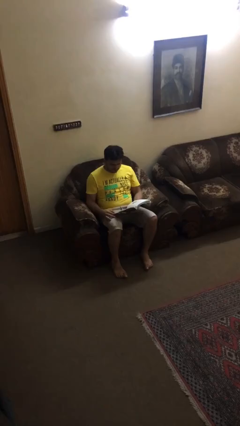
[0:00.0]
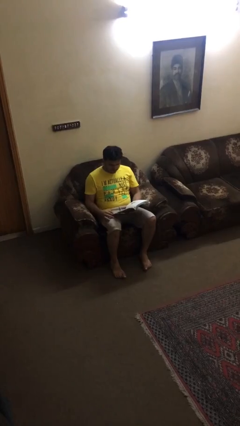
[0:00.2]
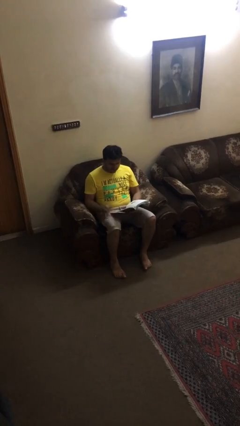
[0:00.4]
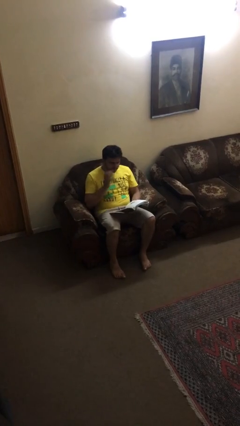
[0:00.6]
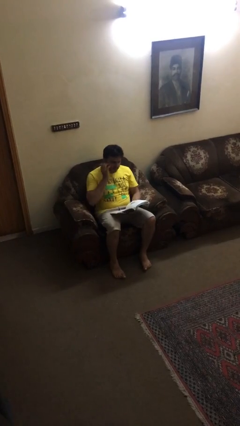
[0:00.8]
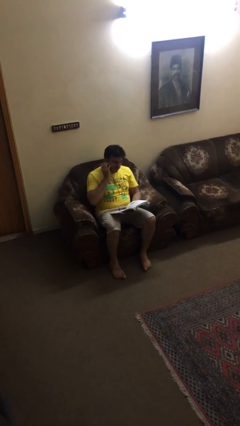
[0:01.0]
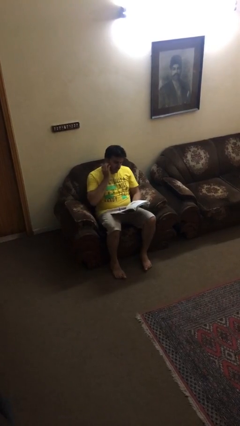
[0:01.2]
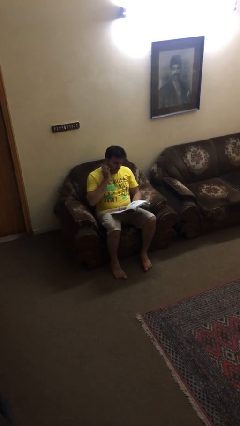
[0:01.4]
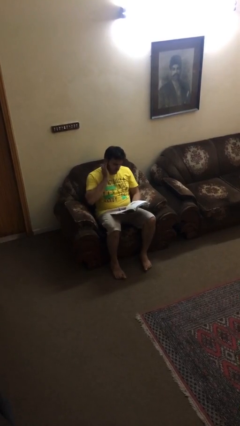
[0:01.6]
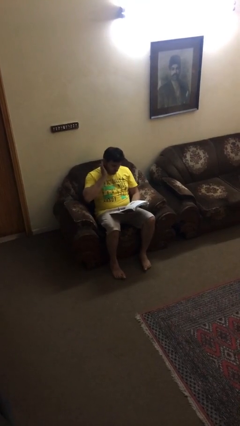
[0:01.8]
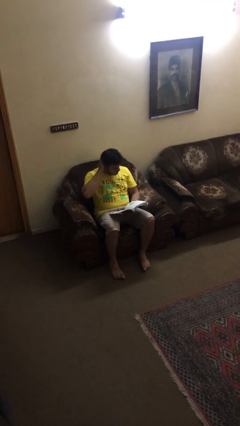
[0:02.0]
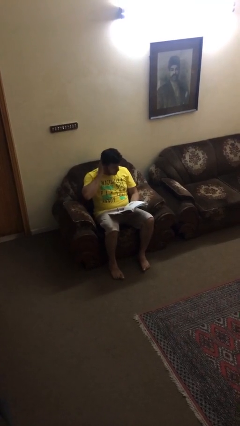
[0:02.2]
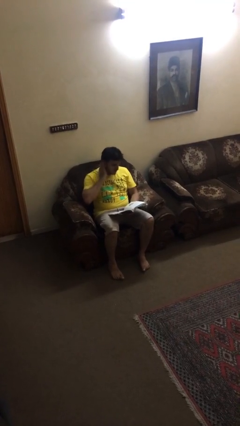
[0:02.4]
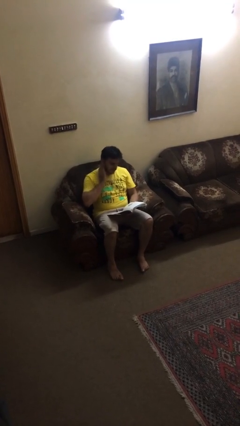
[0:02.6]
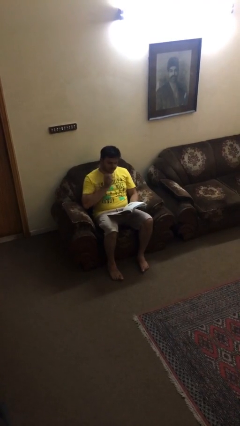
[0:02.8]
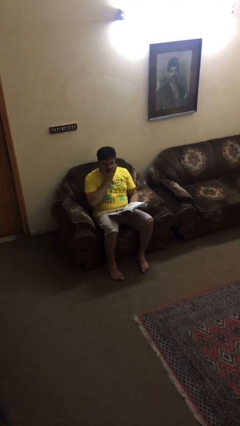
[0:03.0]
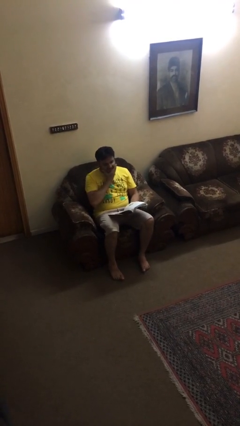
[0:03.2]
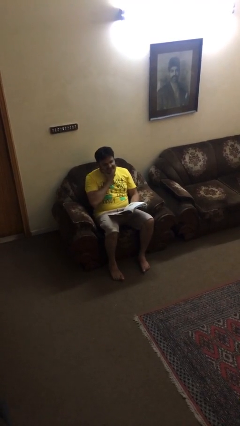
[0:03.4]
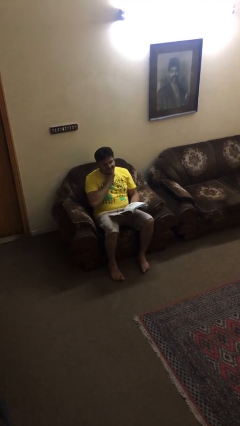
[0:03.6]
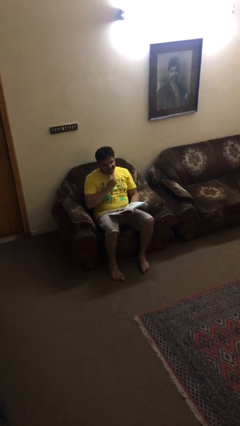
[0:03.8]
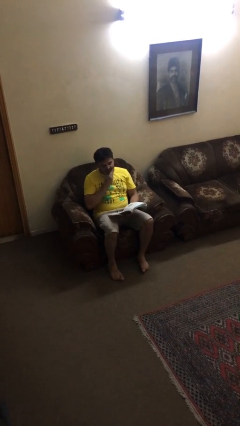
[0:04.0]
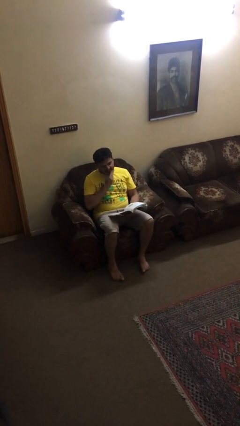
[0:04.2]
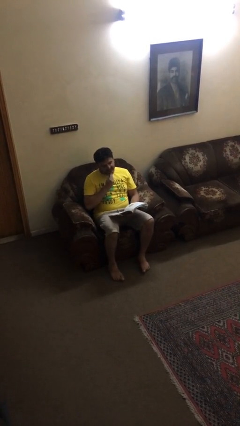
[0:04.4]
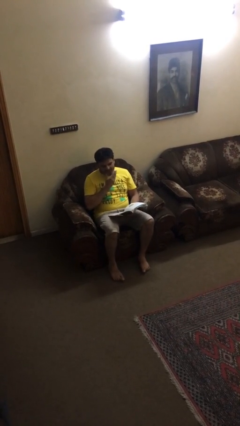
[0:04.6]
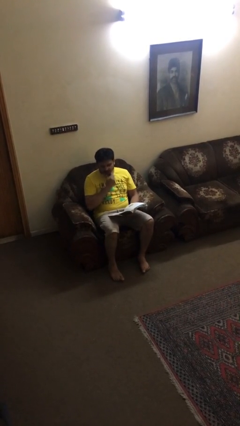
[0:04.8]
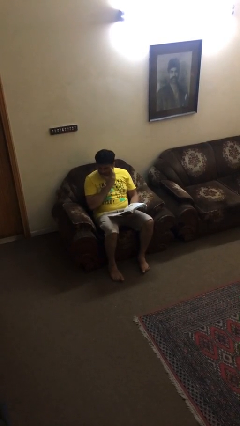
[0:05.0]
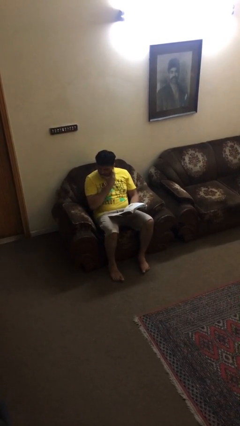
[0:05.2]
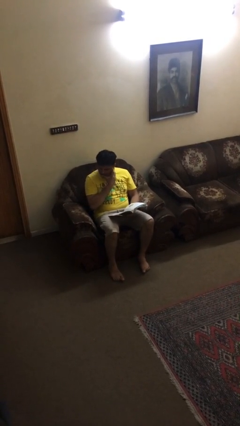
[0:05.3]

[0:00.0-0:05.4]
person reads document

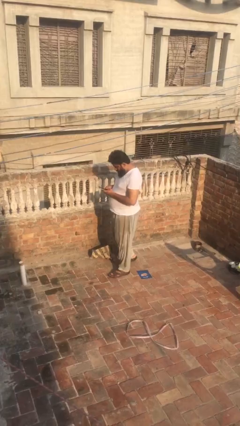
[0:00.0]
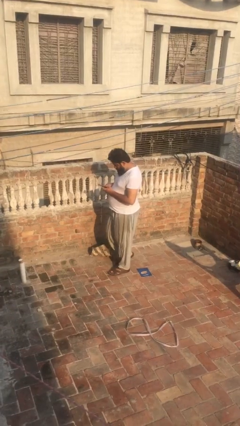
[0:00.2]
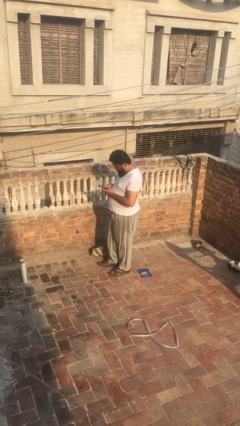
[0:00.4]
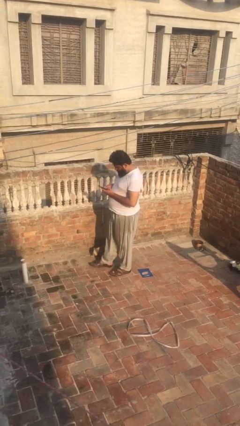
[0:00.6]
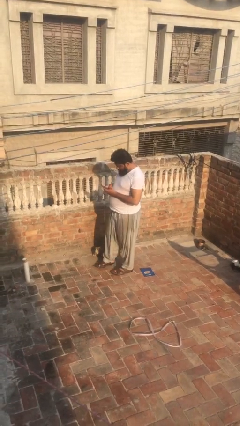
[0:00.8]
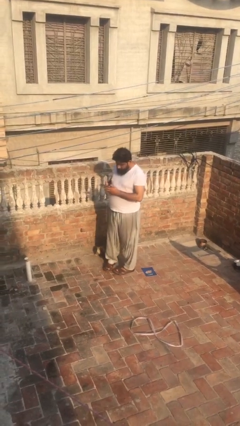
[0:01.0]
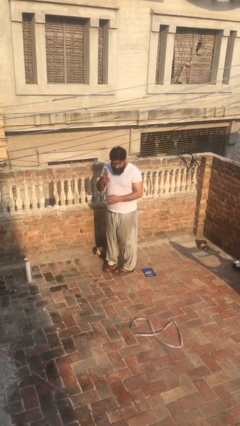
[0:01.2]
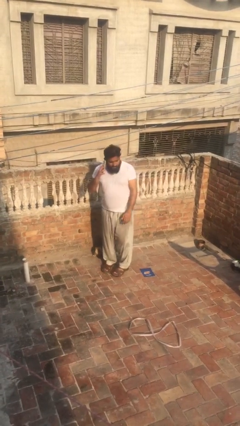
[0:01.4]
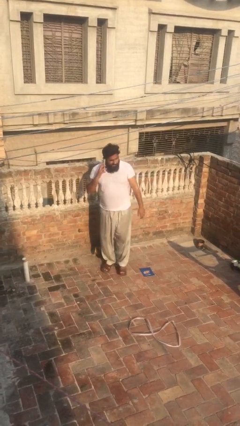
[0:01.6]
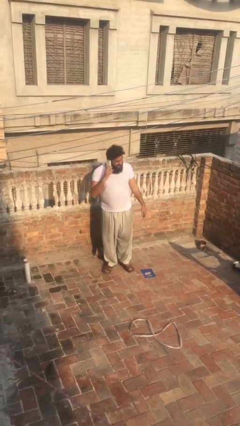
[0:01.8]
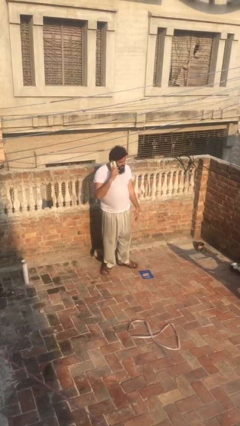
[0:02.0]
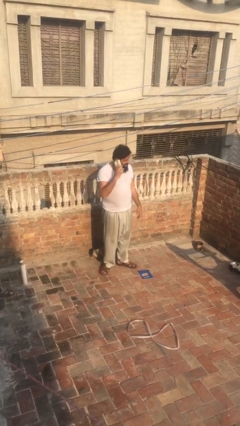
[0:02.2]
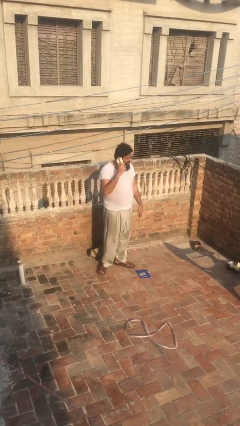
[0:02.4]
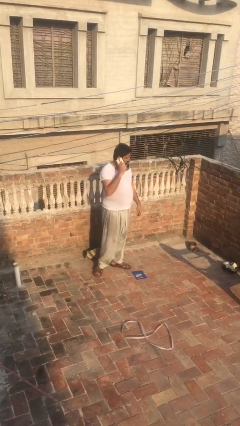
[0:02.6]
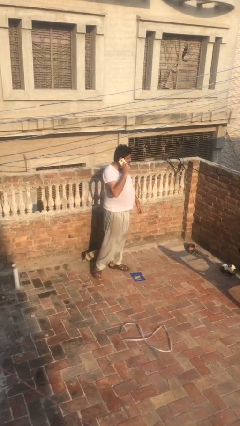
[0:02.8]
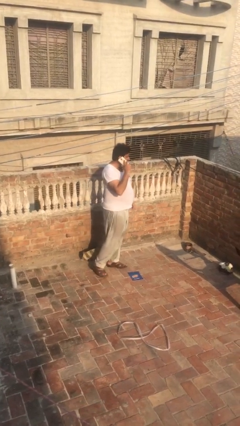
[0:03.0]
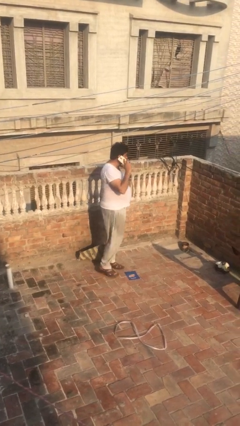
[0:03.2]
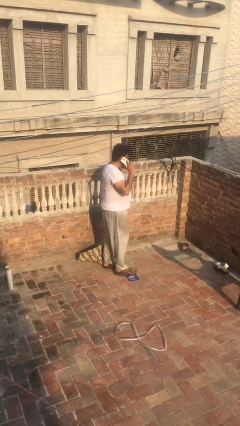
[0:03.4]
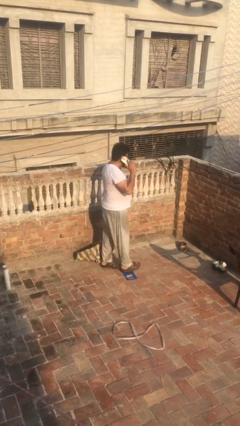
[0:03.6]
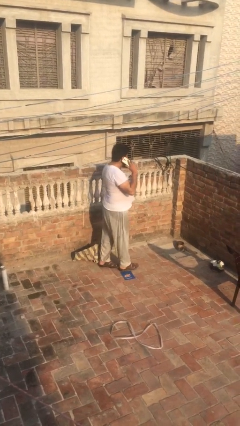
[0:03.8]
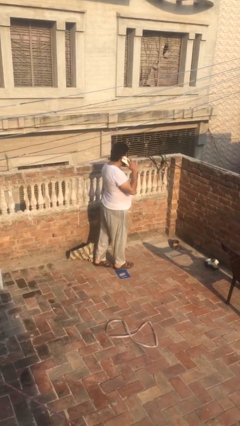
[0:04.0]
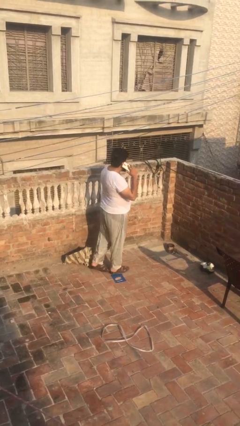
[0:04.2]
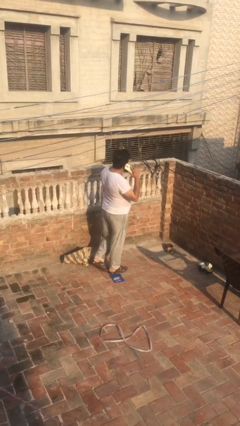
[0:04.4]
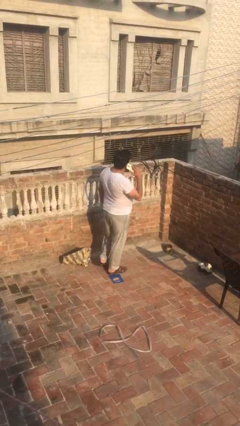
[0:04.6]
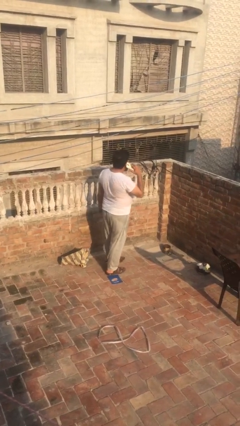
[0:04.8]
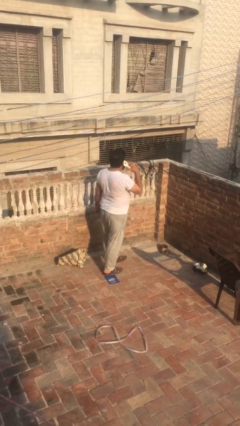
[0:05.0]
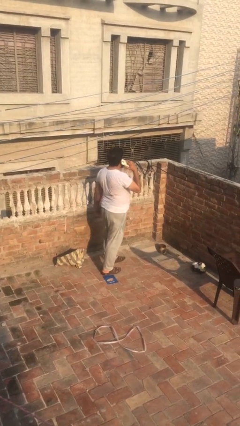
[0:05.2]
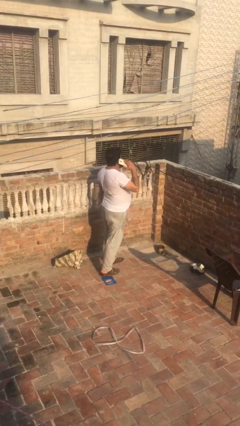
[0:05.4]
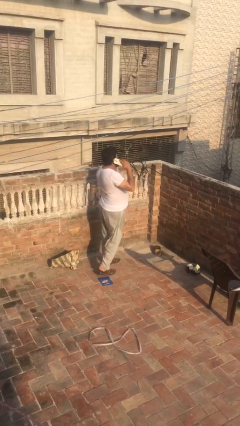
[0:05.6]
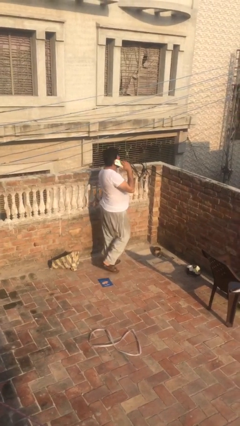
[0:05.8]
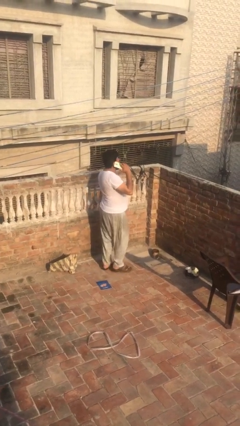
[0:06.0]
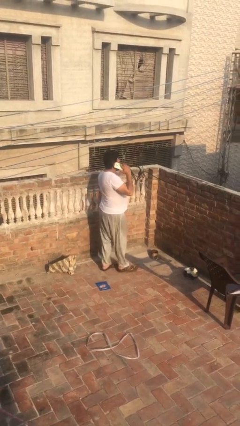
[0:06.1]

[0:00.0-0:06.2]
person talks on phone

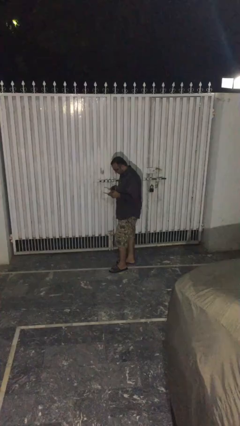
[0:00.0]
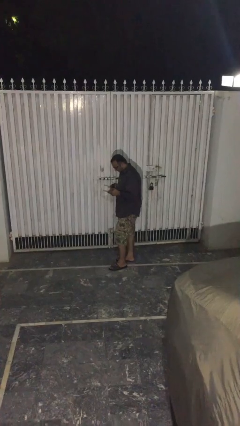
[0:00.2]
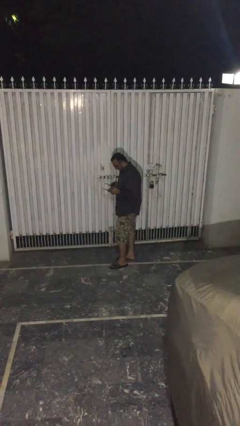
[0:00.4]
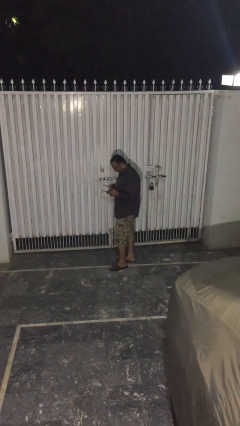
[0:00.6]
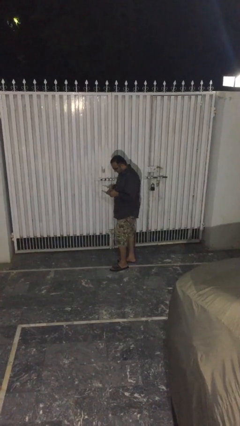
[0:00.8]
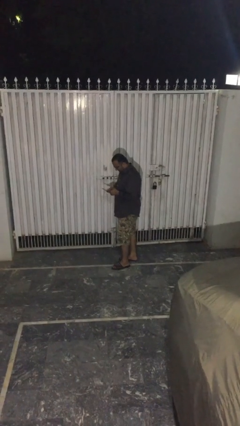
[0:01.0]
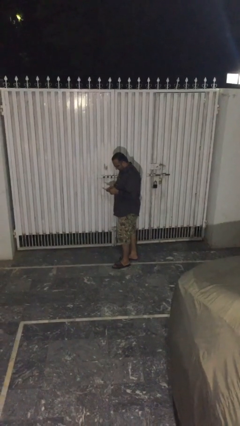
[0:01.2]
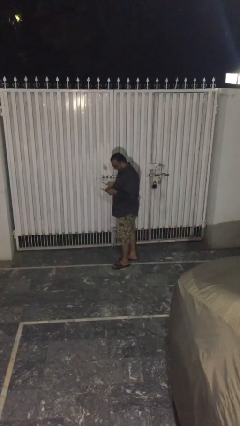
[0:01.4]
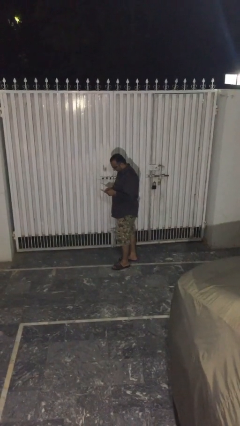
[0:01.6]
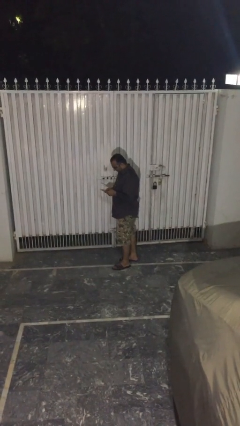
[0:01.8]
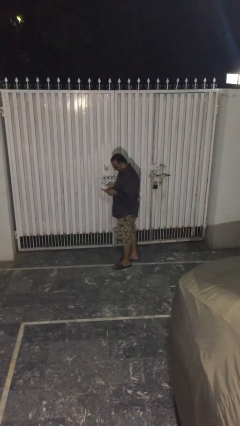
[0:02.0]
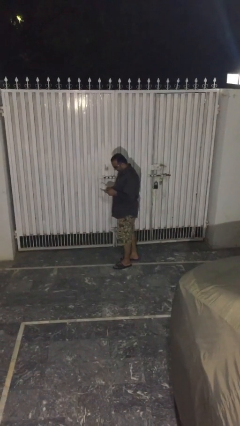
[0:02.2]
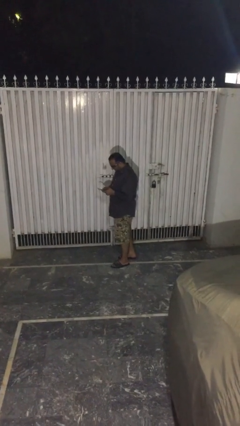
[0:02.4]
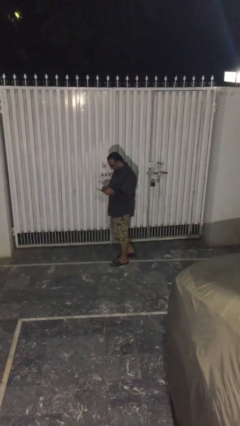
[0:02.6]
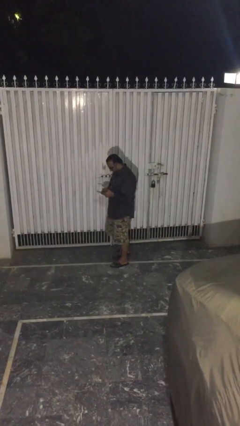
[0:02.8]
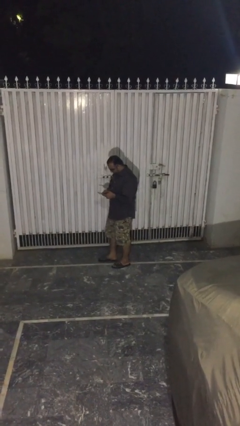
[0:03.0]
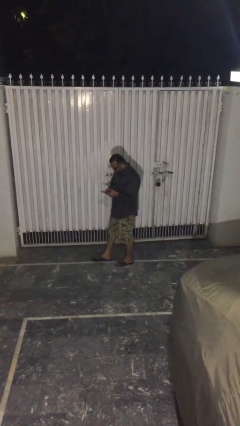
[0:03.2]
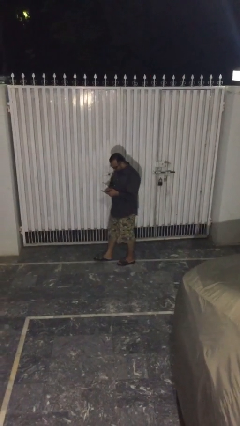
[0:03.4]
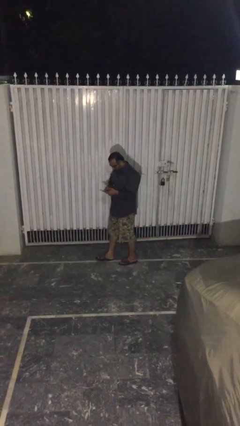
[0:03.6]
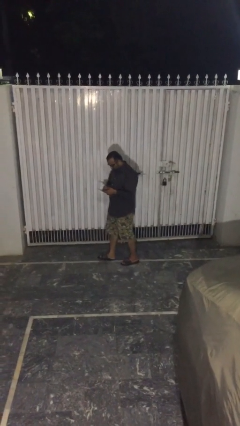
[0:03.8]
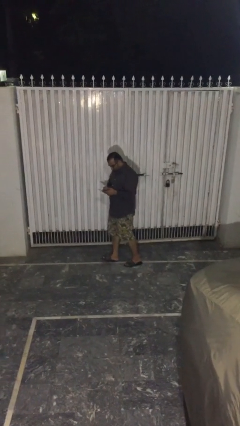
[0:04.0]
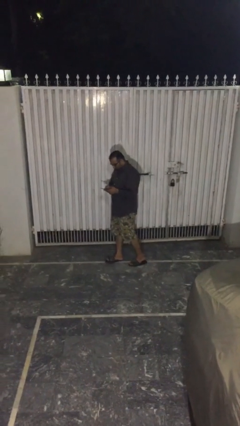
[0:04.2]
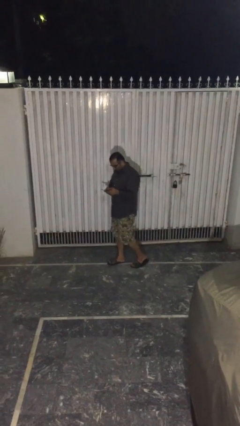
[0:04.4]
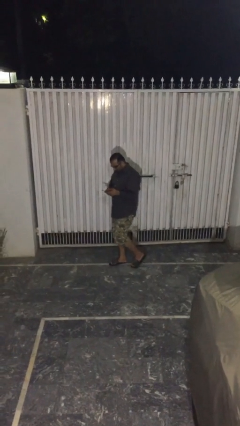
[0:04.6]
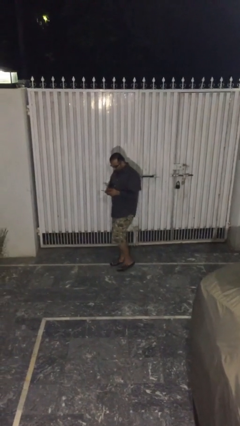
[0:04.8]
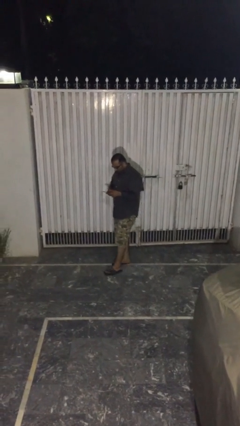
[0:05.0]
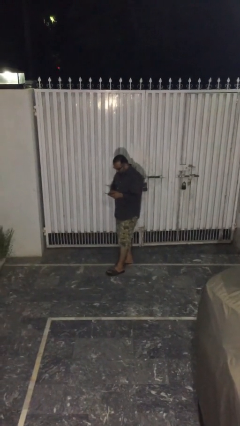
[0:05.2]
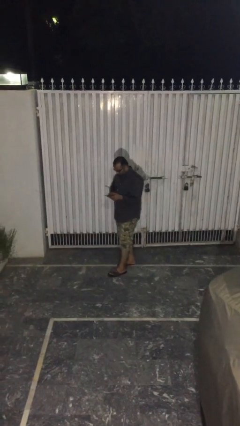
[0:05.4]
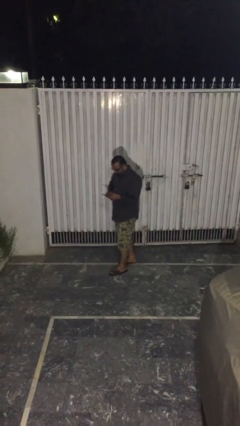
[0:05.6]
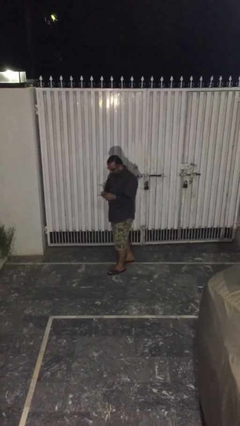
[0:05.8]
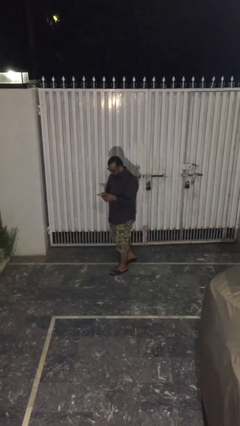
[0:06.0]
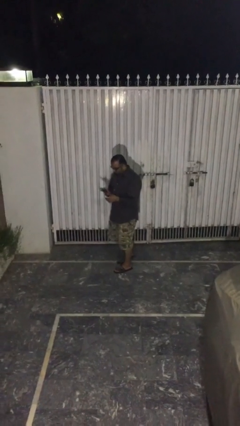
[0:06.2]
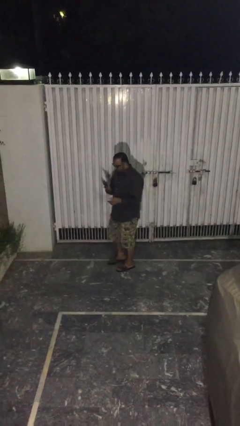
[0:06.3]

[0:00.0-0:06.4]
person texts on phone
